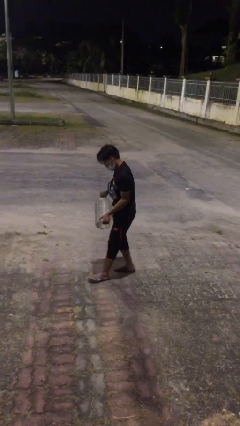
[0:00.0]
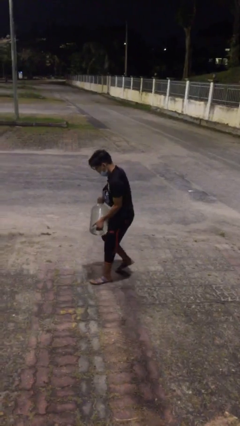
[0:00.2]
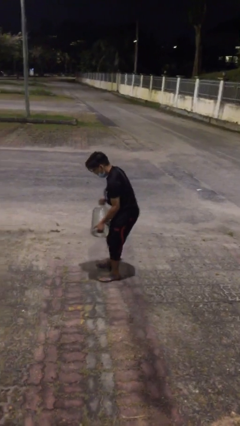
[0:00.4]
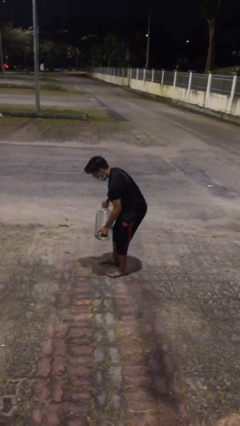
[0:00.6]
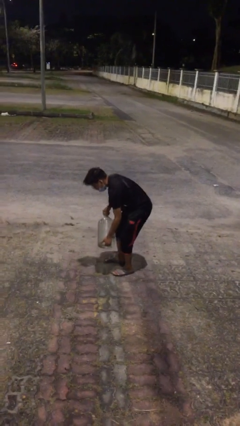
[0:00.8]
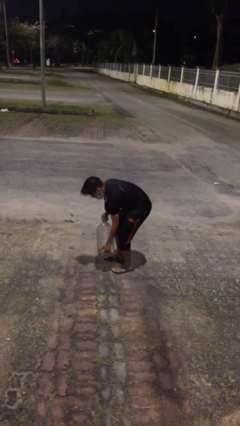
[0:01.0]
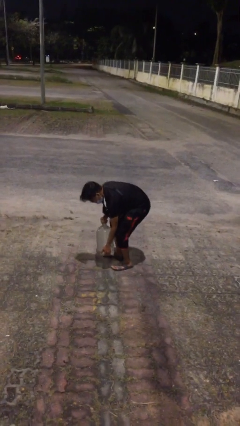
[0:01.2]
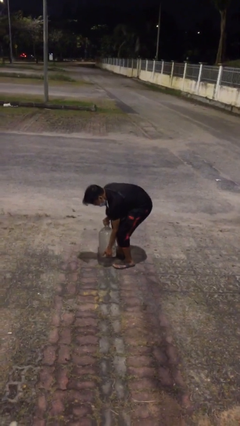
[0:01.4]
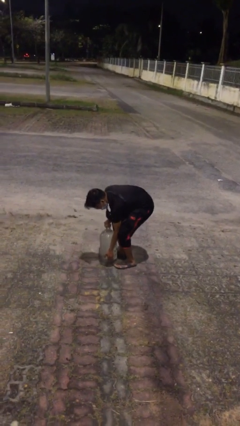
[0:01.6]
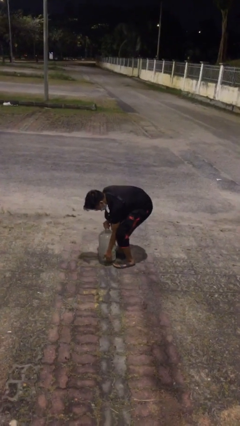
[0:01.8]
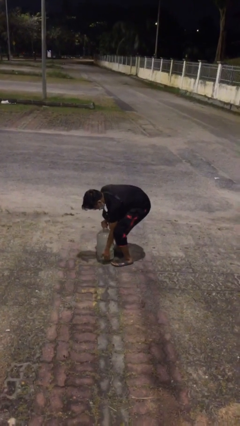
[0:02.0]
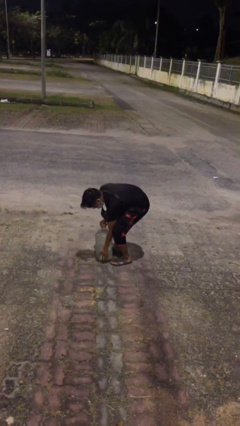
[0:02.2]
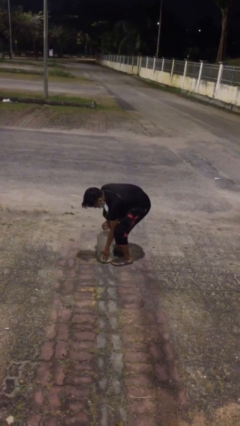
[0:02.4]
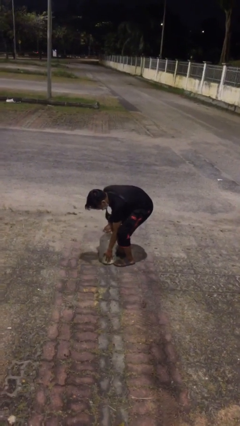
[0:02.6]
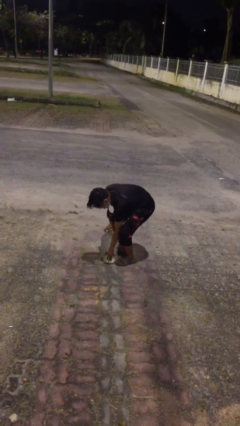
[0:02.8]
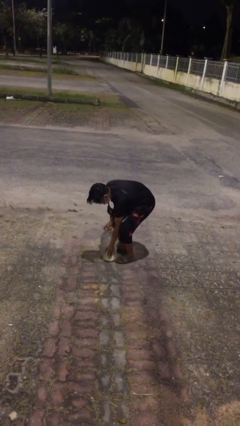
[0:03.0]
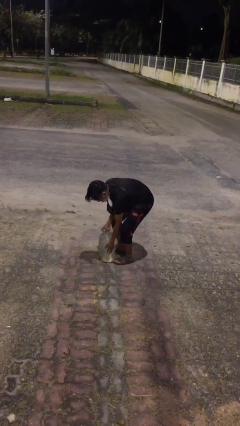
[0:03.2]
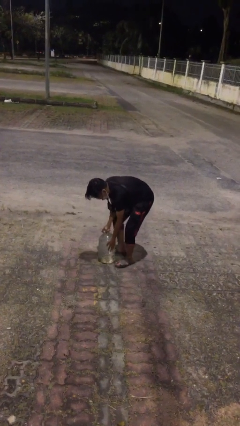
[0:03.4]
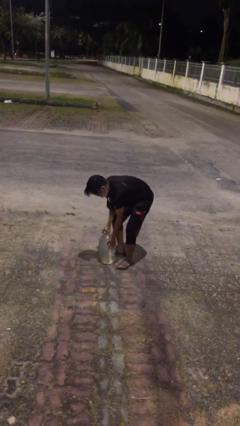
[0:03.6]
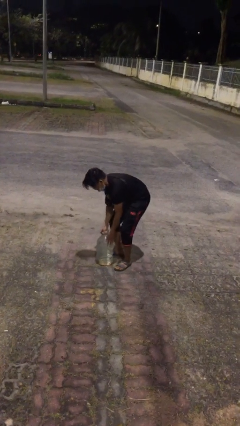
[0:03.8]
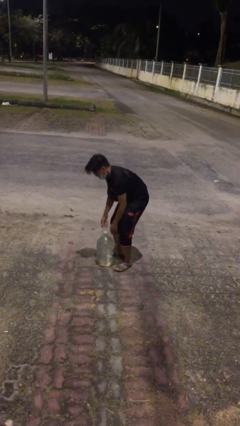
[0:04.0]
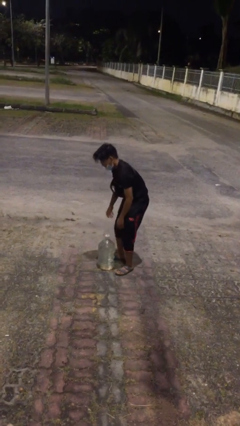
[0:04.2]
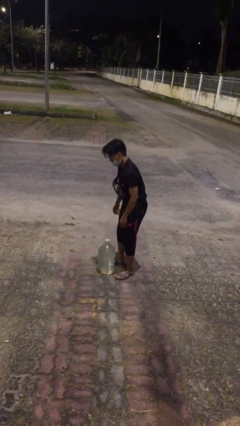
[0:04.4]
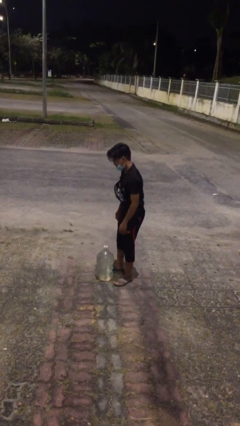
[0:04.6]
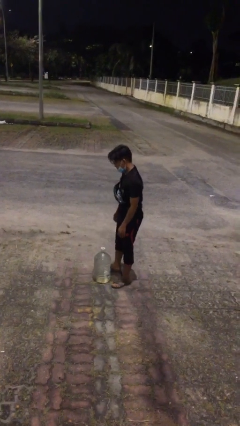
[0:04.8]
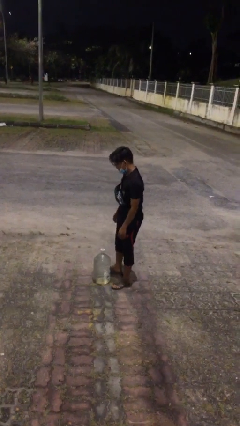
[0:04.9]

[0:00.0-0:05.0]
person puts down object on floor

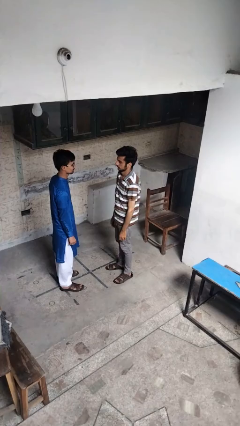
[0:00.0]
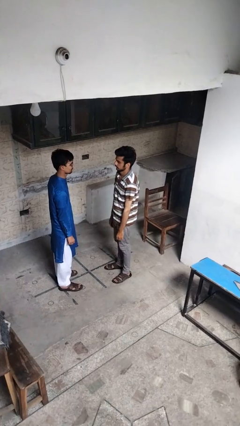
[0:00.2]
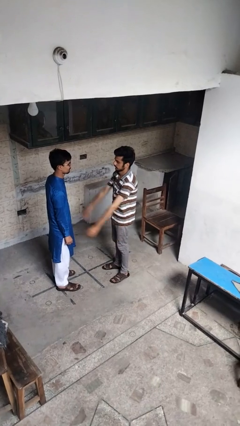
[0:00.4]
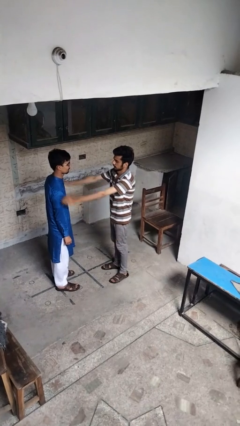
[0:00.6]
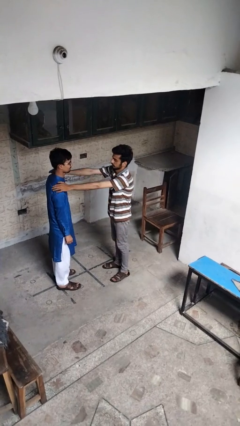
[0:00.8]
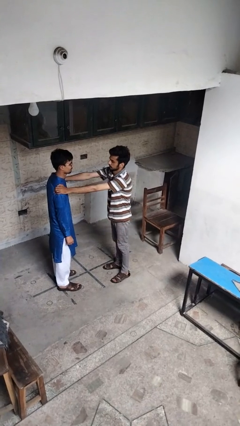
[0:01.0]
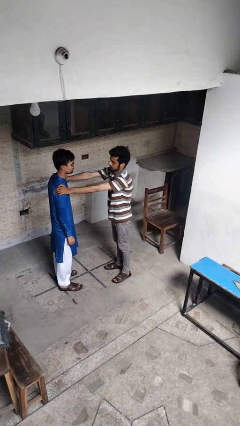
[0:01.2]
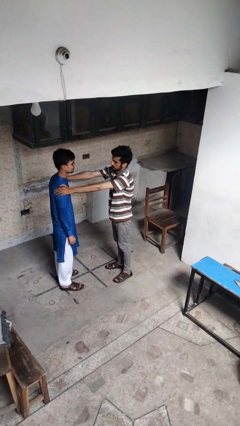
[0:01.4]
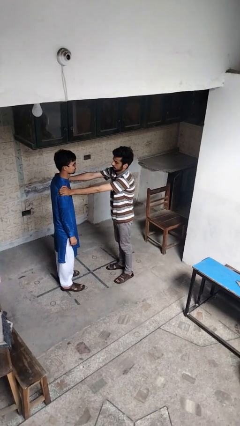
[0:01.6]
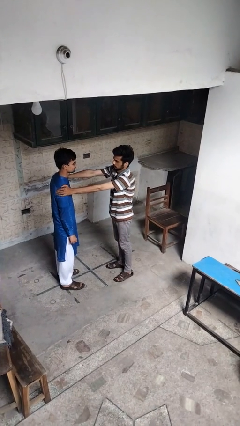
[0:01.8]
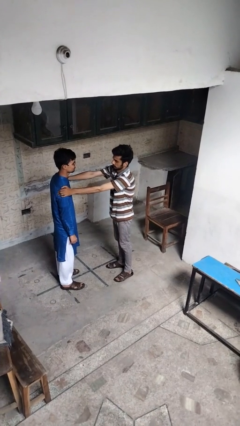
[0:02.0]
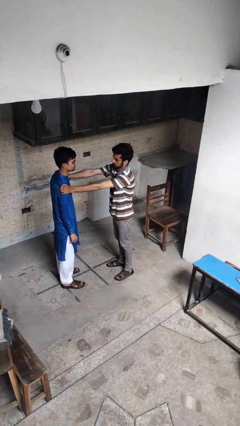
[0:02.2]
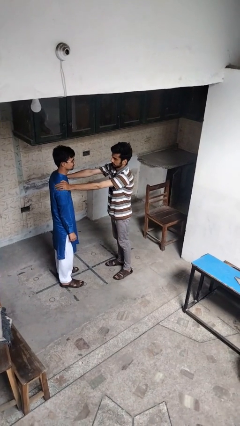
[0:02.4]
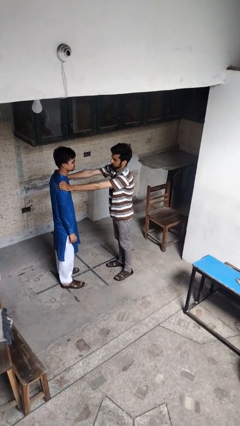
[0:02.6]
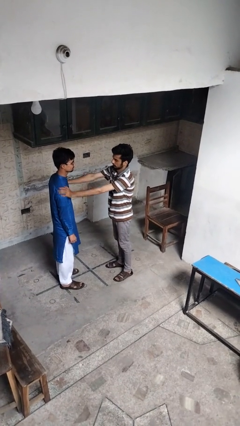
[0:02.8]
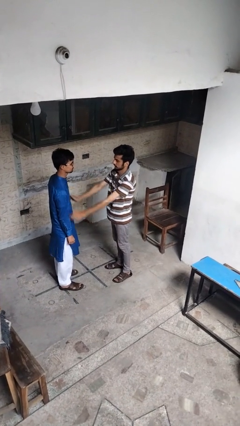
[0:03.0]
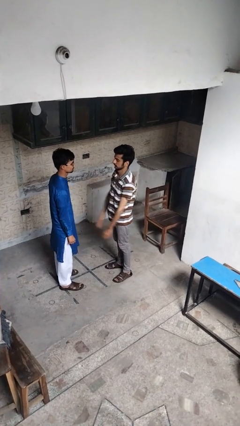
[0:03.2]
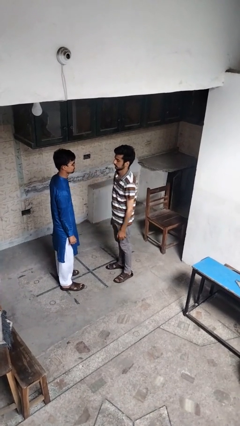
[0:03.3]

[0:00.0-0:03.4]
person pounds shoulders of person

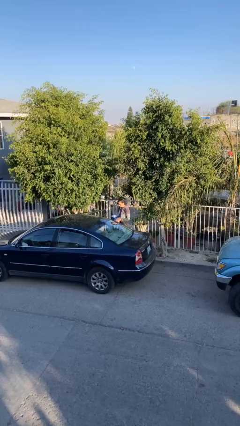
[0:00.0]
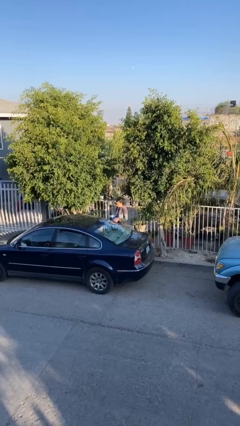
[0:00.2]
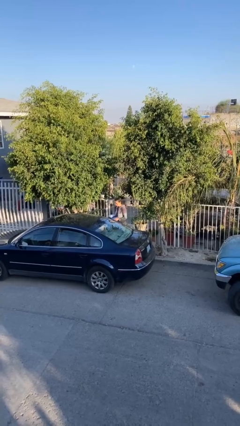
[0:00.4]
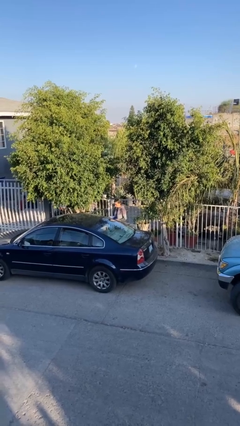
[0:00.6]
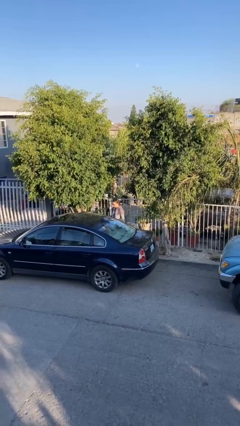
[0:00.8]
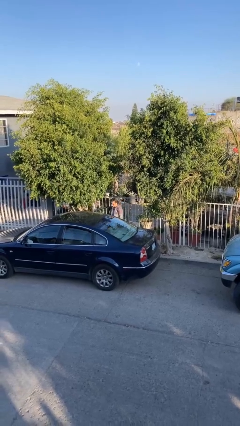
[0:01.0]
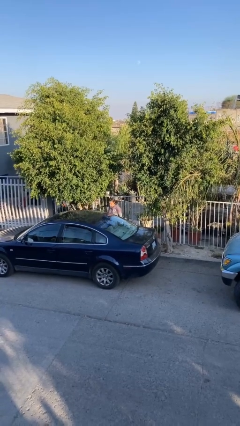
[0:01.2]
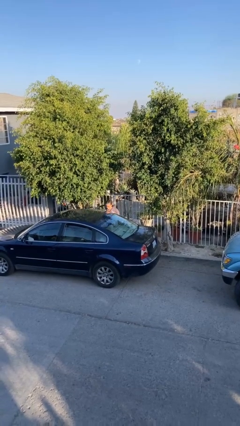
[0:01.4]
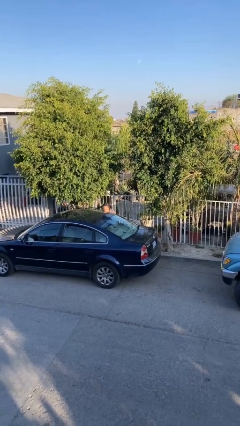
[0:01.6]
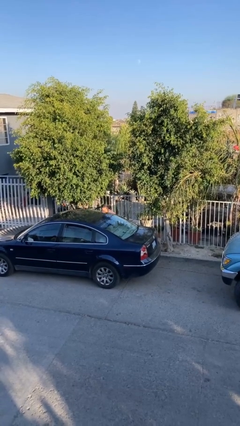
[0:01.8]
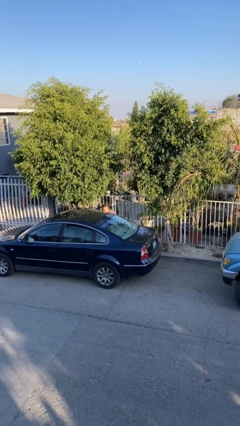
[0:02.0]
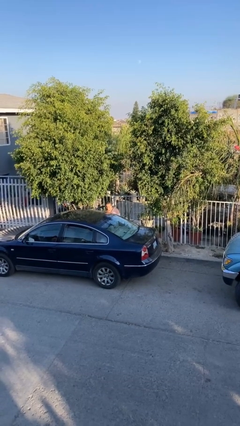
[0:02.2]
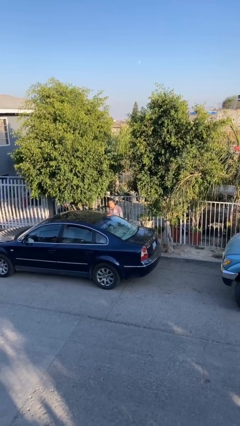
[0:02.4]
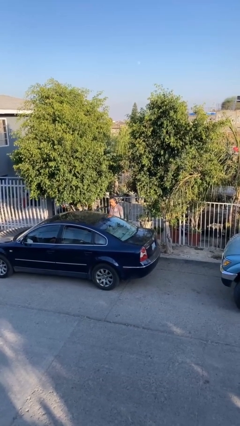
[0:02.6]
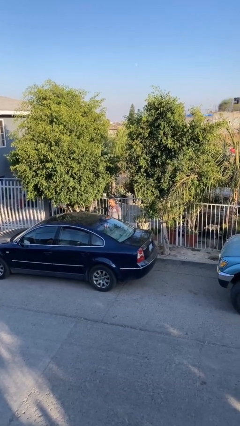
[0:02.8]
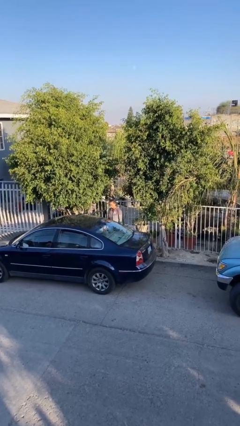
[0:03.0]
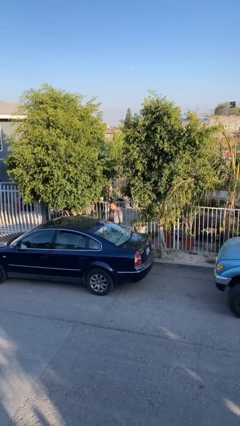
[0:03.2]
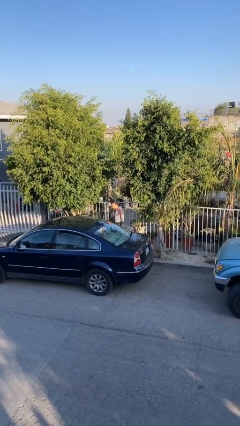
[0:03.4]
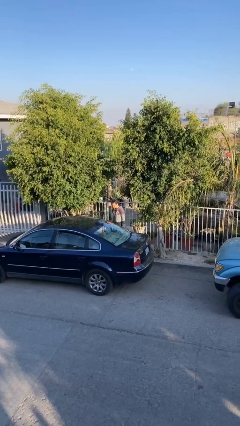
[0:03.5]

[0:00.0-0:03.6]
person loads car

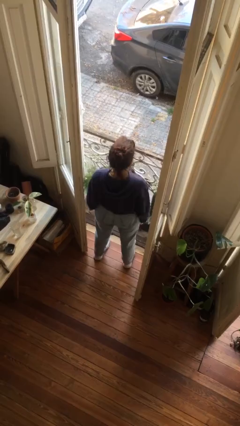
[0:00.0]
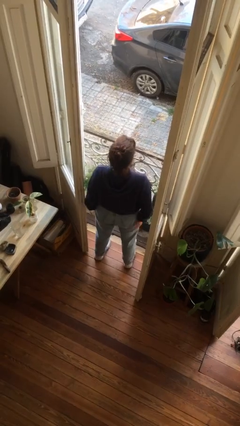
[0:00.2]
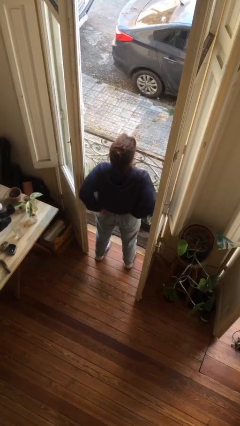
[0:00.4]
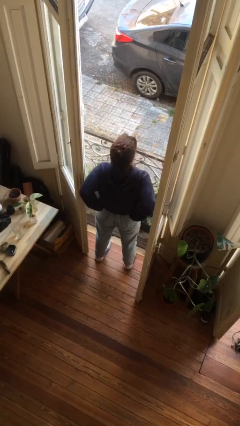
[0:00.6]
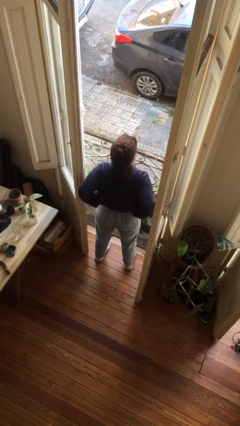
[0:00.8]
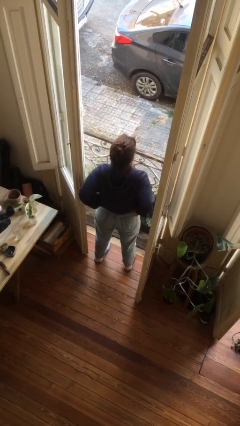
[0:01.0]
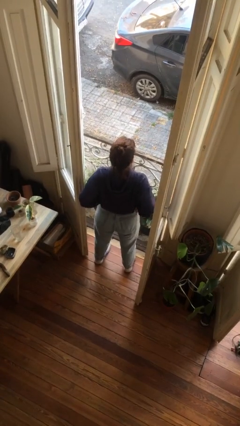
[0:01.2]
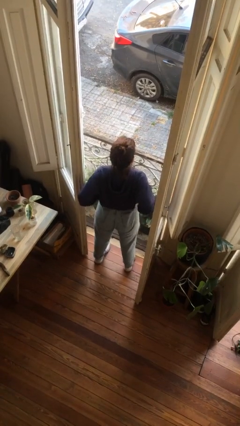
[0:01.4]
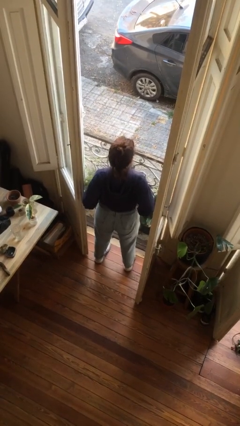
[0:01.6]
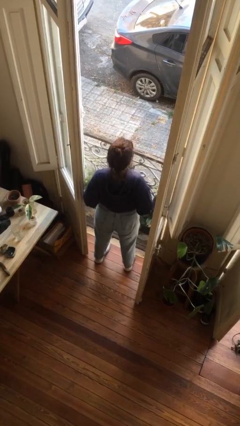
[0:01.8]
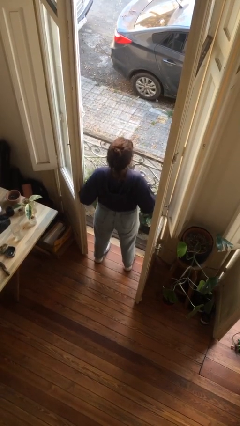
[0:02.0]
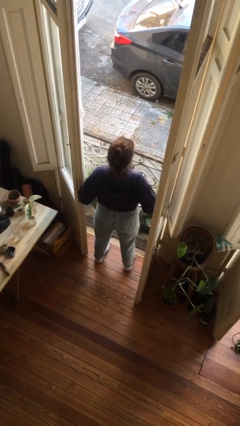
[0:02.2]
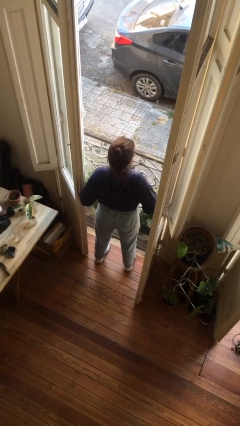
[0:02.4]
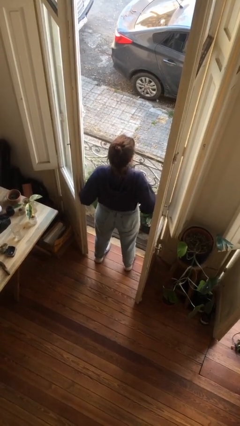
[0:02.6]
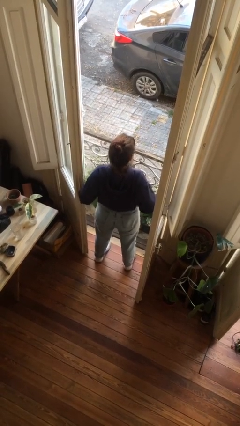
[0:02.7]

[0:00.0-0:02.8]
person hikes up pants

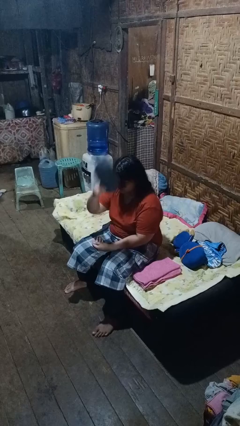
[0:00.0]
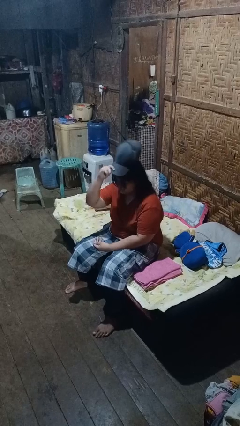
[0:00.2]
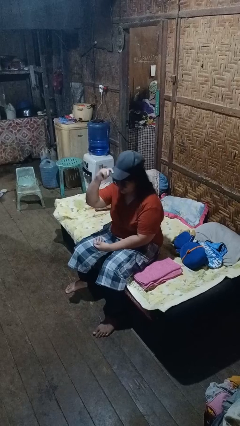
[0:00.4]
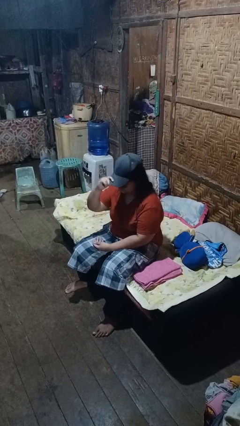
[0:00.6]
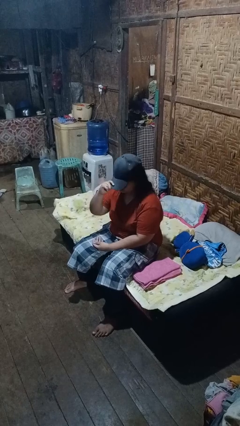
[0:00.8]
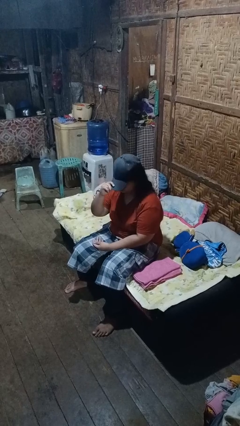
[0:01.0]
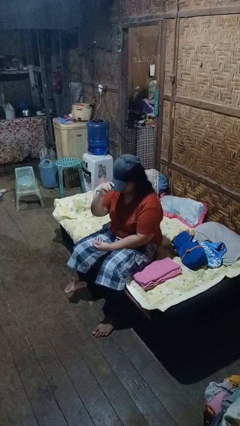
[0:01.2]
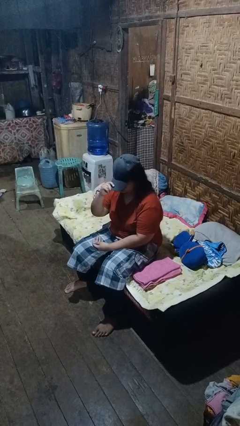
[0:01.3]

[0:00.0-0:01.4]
person puts on hat

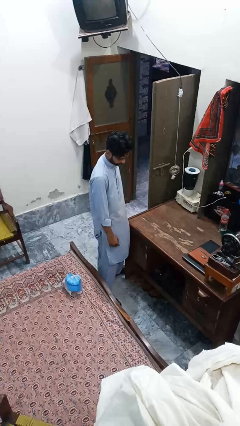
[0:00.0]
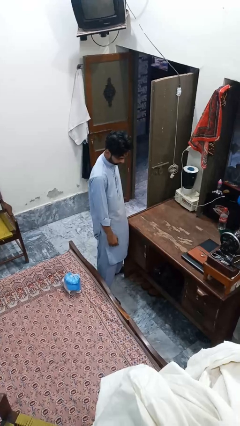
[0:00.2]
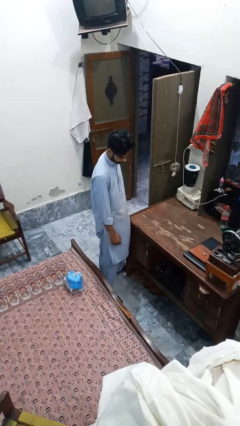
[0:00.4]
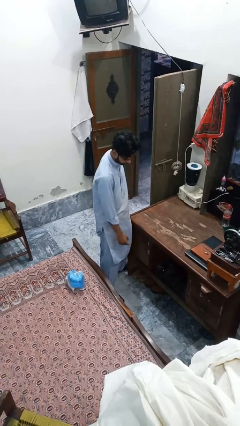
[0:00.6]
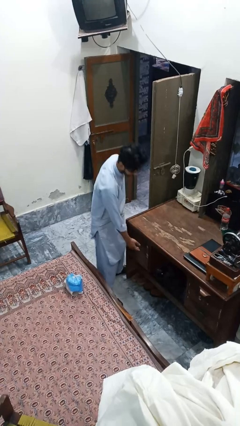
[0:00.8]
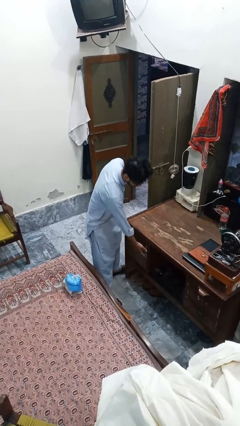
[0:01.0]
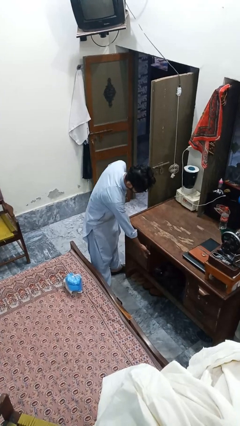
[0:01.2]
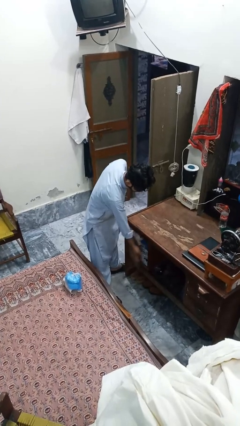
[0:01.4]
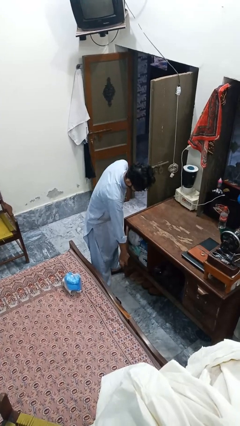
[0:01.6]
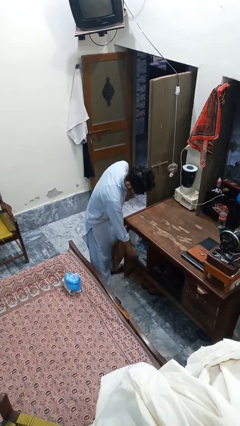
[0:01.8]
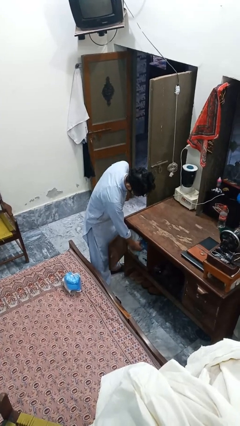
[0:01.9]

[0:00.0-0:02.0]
person picks up object from cabinet
